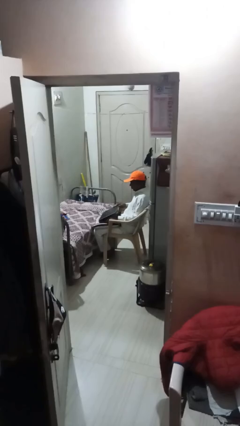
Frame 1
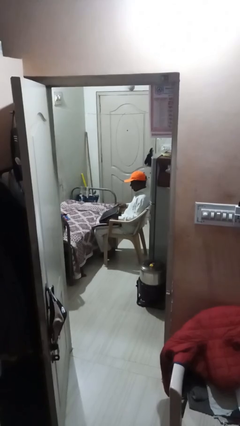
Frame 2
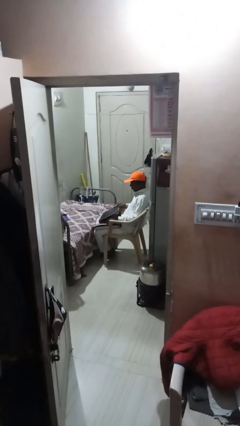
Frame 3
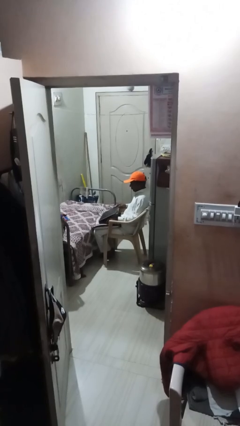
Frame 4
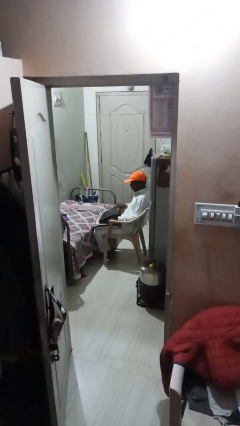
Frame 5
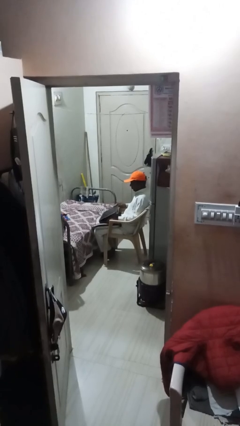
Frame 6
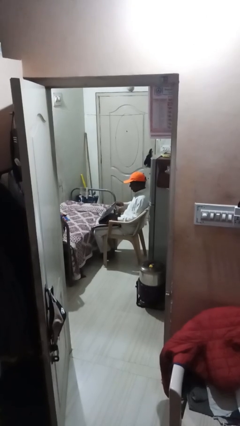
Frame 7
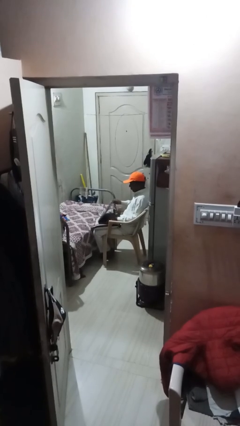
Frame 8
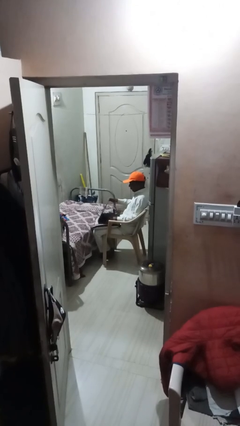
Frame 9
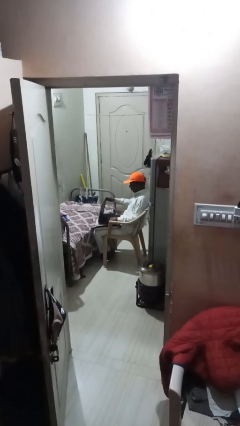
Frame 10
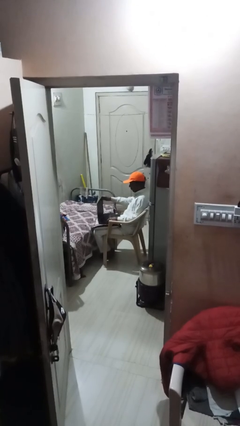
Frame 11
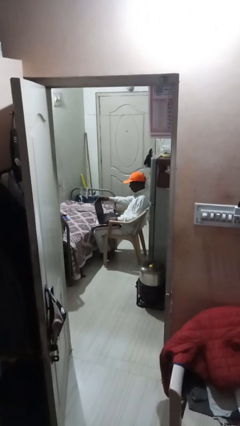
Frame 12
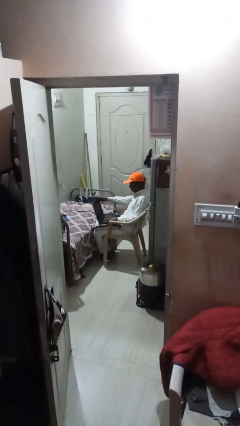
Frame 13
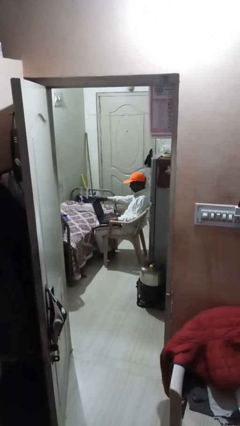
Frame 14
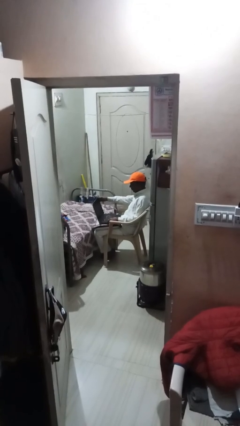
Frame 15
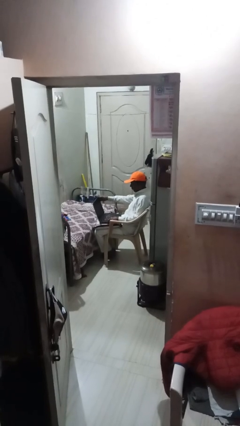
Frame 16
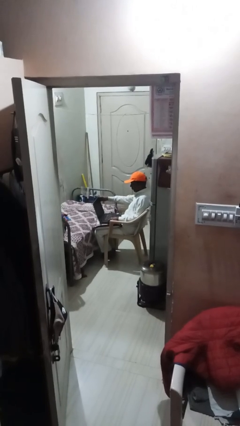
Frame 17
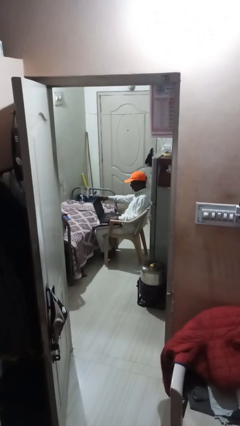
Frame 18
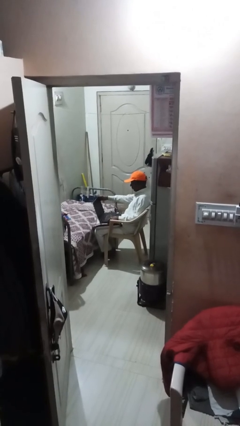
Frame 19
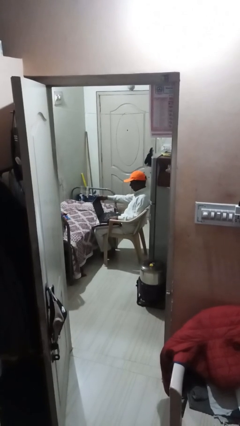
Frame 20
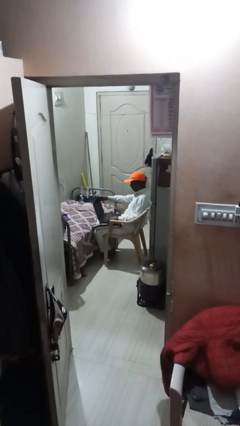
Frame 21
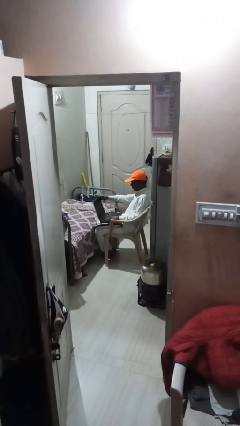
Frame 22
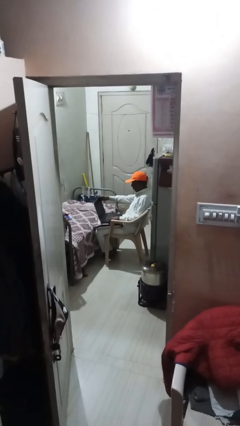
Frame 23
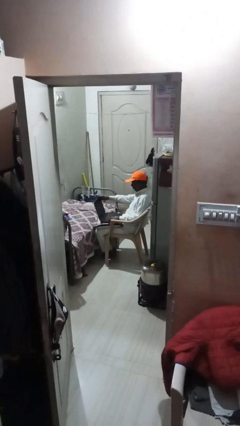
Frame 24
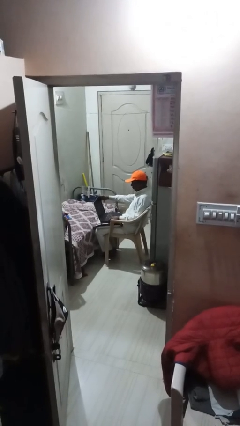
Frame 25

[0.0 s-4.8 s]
person interacts with laptop

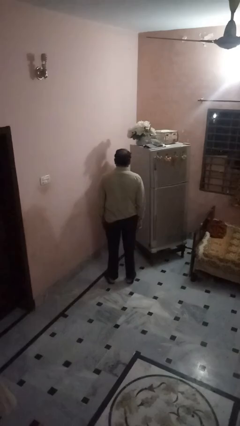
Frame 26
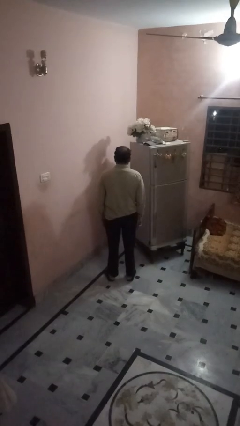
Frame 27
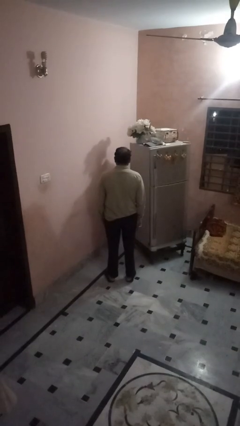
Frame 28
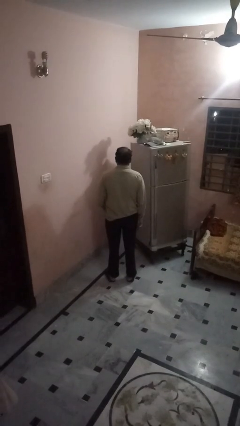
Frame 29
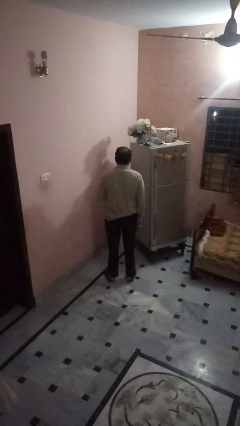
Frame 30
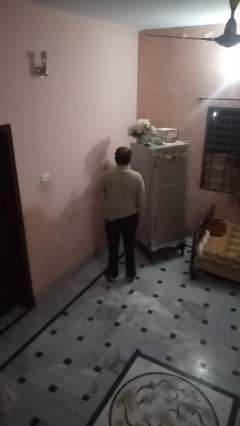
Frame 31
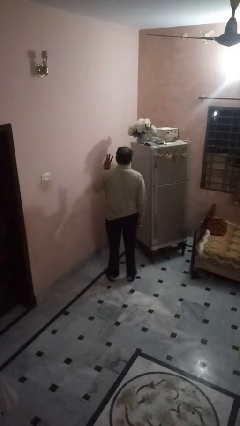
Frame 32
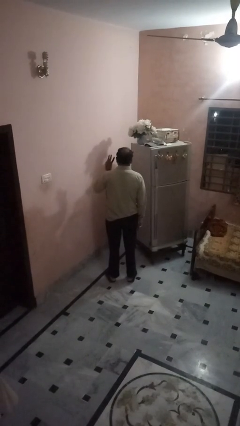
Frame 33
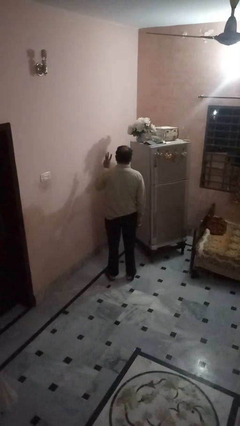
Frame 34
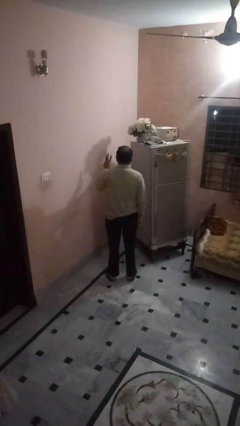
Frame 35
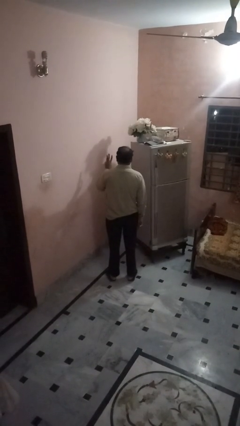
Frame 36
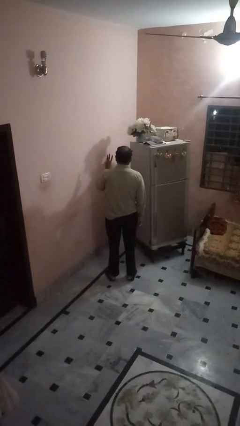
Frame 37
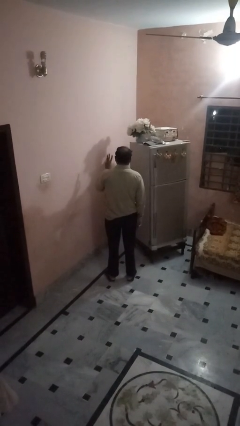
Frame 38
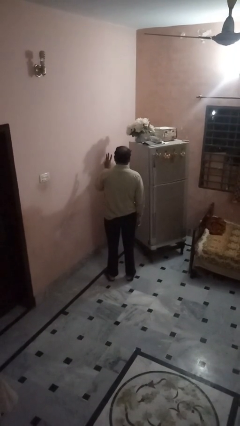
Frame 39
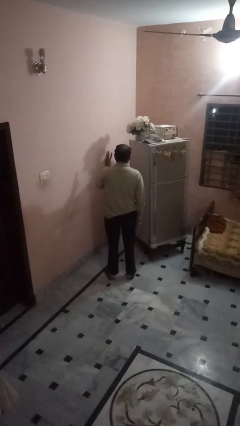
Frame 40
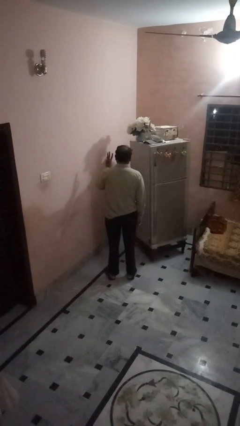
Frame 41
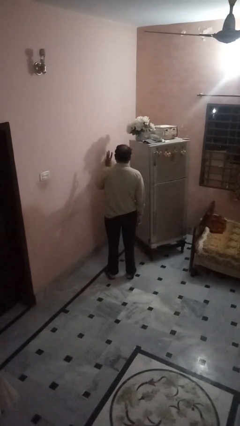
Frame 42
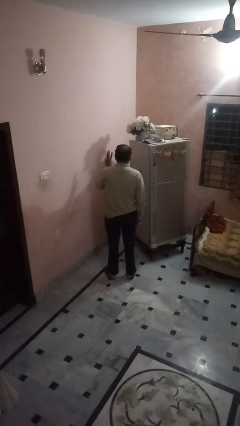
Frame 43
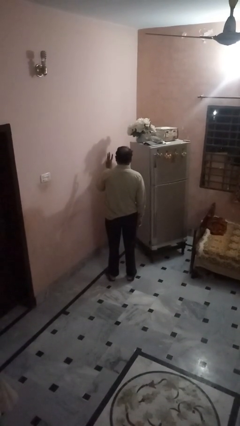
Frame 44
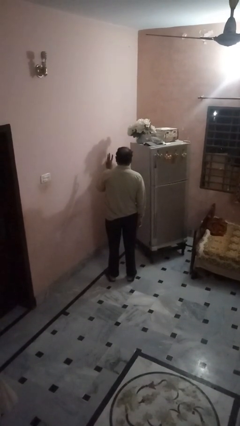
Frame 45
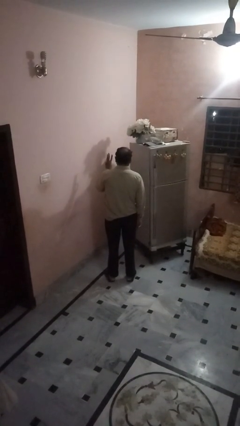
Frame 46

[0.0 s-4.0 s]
person gestures number three

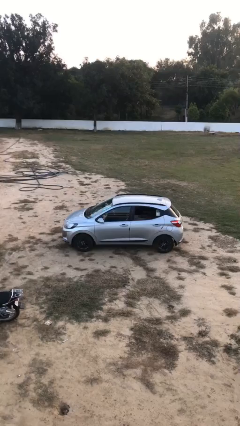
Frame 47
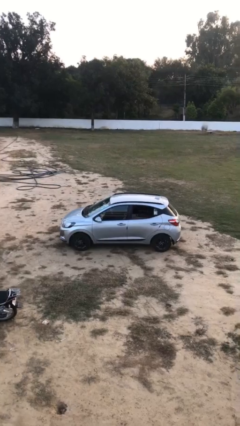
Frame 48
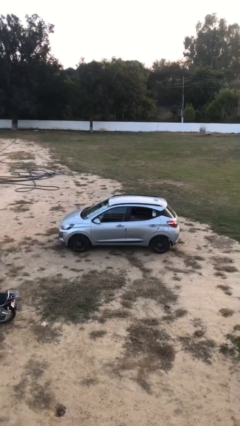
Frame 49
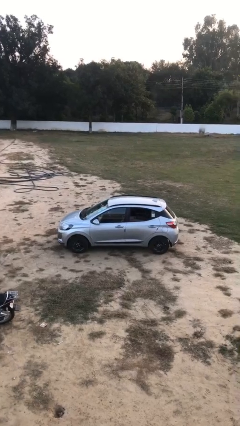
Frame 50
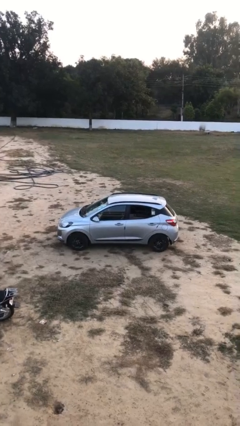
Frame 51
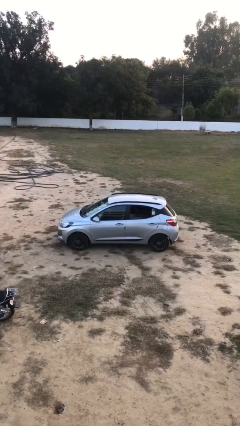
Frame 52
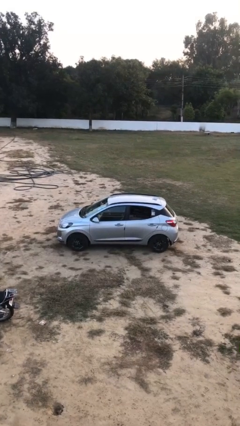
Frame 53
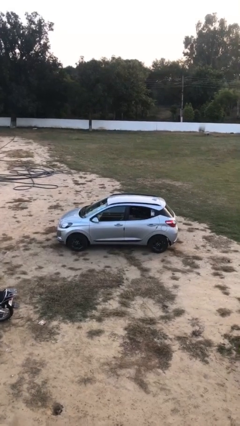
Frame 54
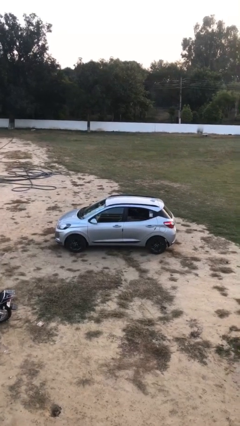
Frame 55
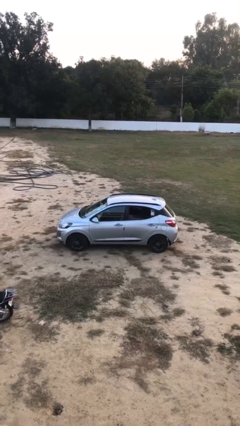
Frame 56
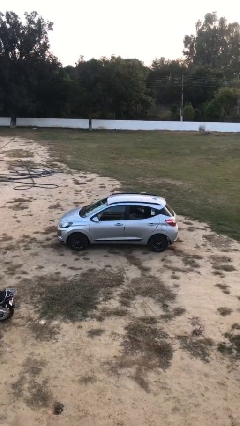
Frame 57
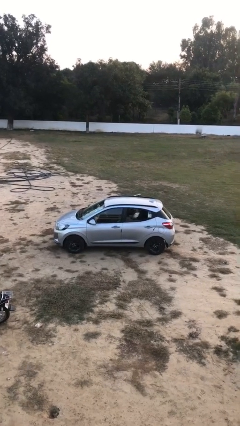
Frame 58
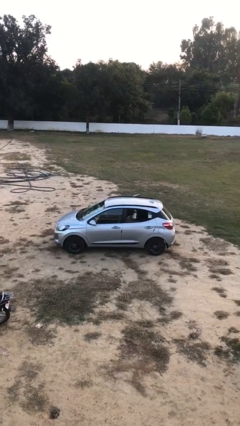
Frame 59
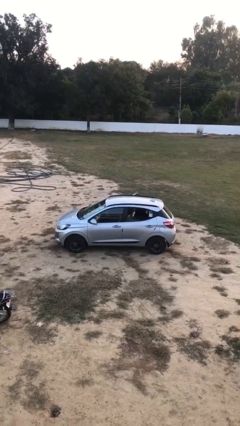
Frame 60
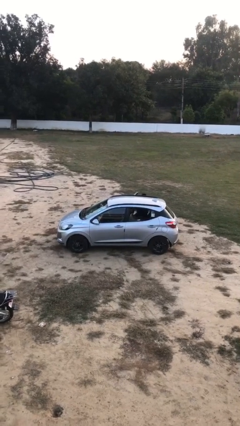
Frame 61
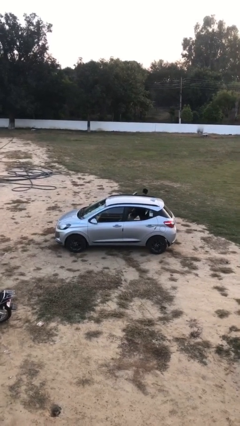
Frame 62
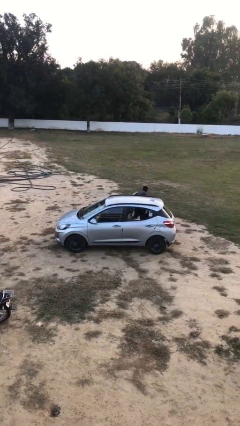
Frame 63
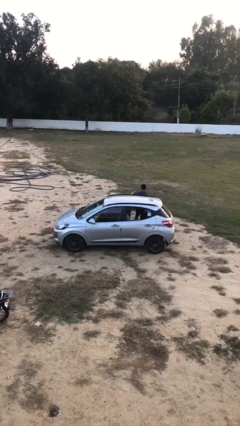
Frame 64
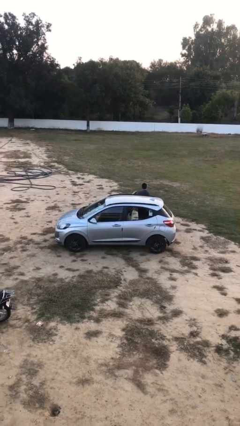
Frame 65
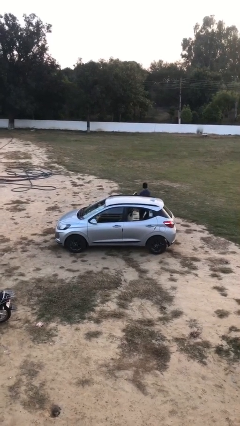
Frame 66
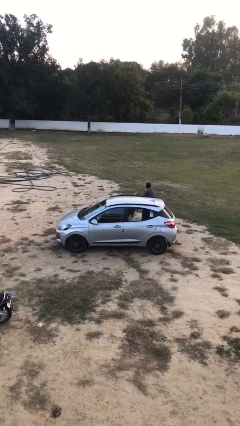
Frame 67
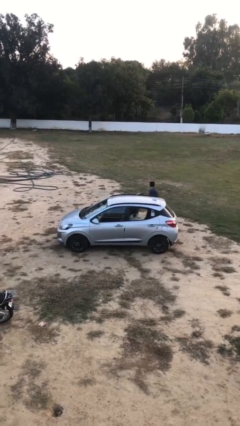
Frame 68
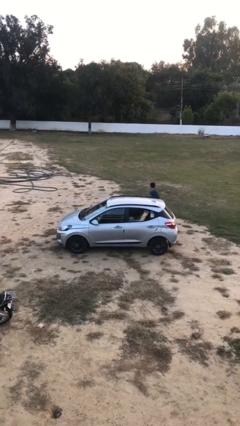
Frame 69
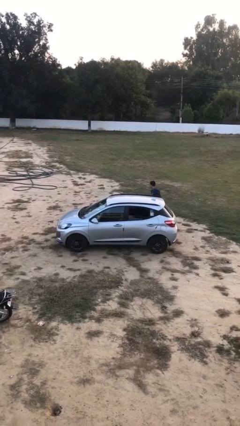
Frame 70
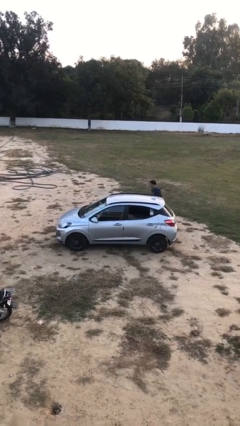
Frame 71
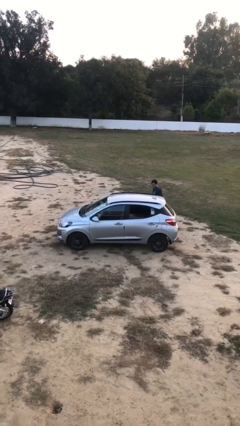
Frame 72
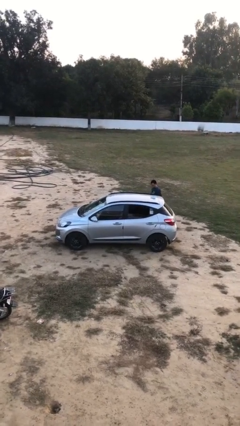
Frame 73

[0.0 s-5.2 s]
car drops off person

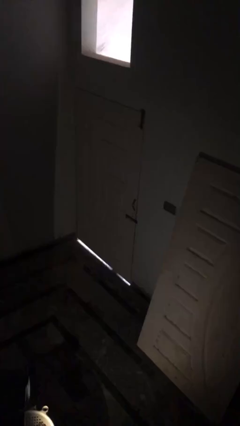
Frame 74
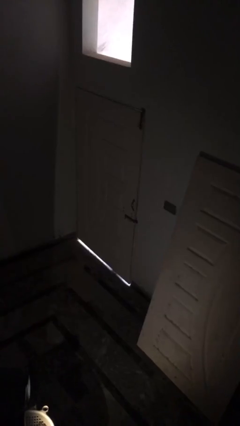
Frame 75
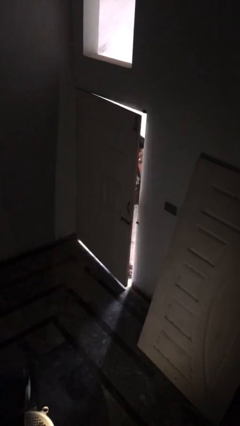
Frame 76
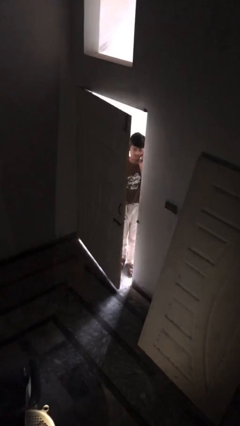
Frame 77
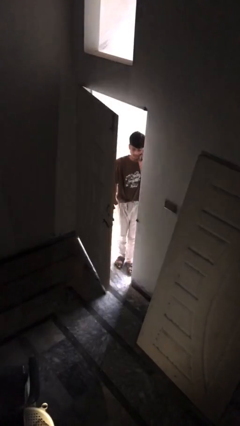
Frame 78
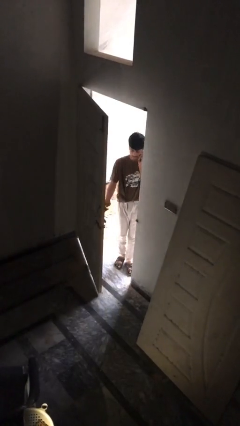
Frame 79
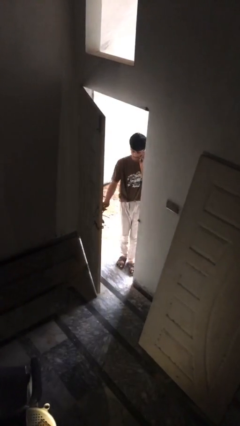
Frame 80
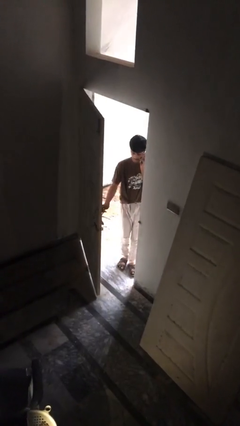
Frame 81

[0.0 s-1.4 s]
person opens facility door

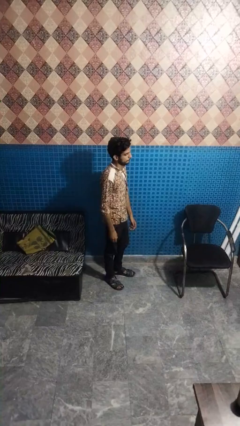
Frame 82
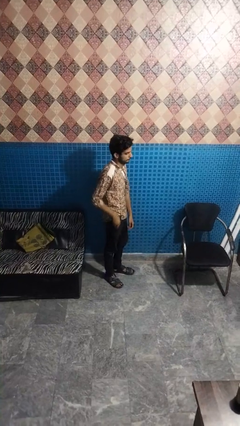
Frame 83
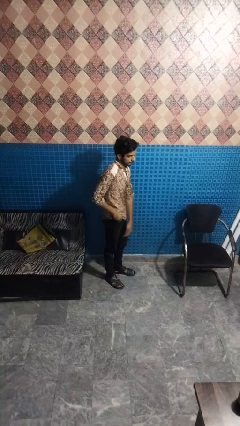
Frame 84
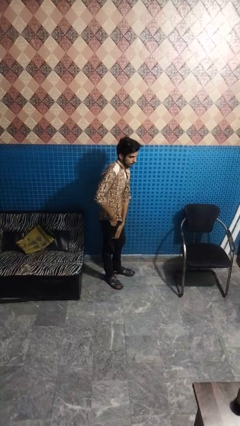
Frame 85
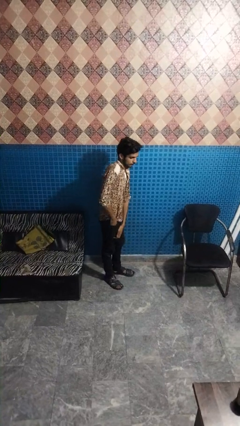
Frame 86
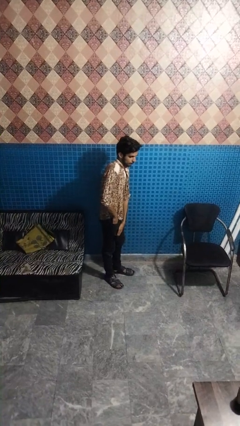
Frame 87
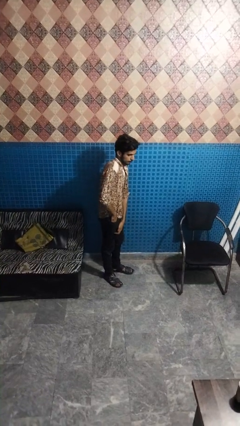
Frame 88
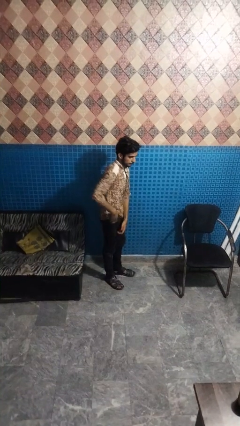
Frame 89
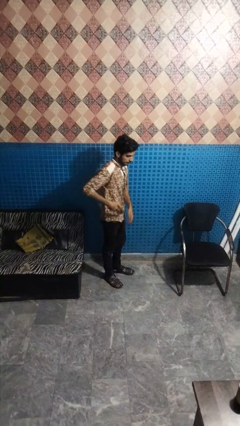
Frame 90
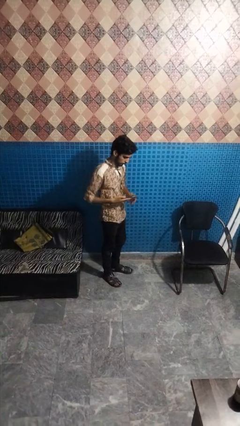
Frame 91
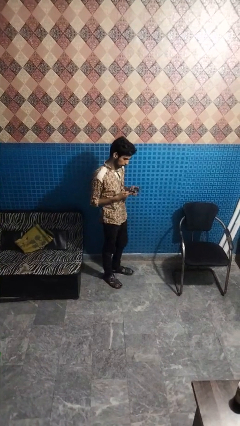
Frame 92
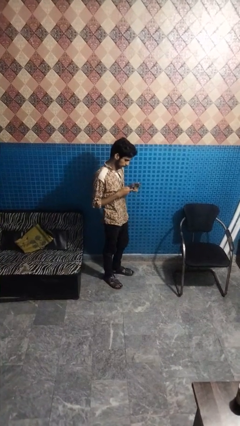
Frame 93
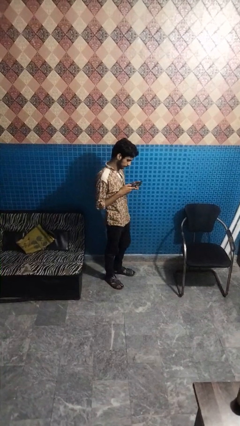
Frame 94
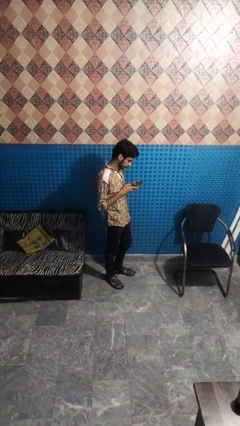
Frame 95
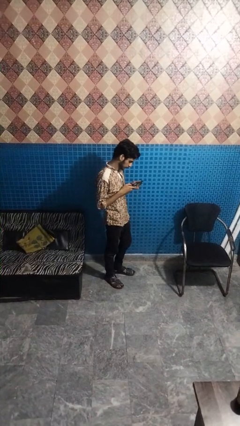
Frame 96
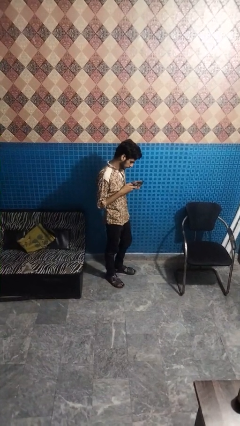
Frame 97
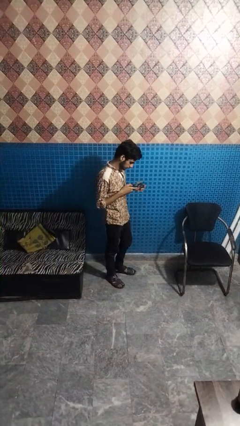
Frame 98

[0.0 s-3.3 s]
person takes phone from pocket
